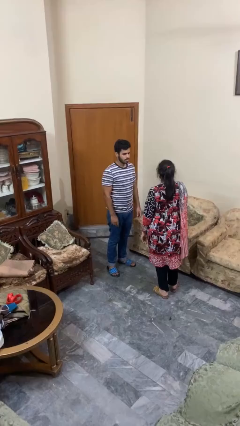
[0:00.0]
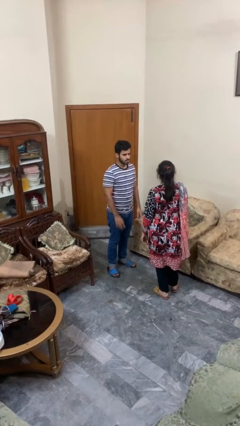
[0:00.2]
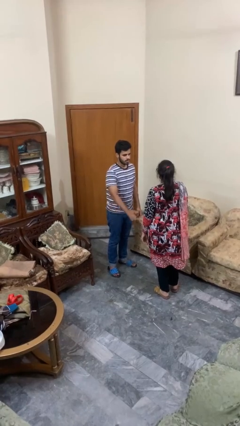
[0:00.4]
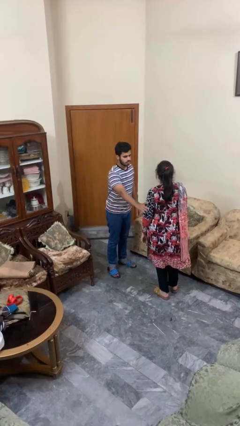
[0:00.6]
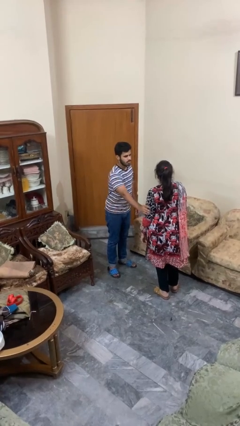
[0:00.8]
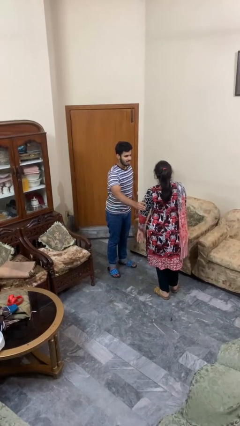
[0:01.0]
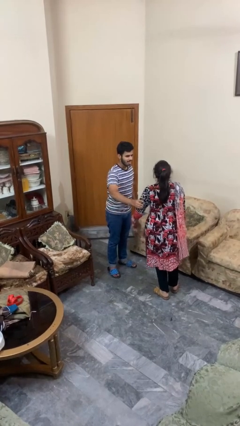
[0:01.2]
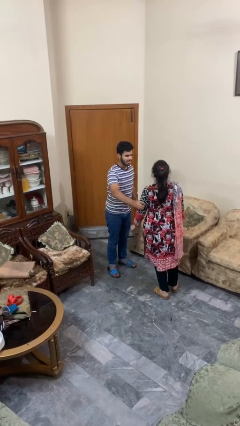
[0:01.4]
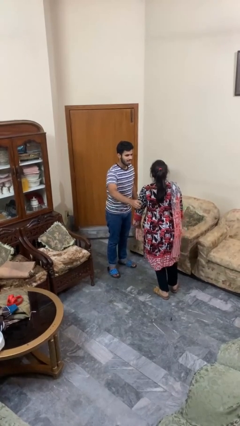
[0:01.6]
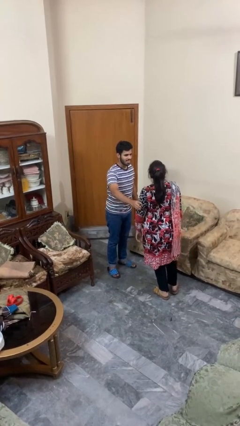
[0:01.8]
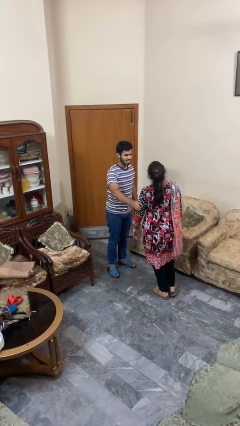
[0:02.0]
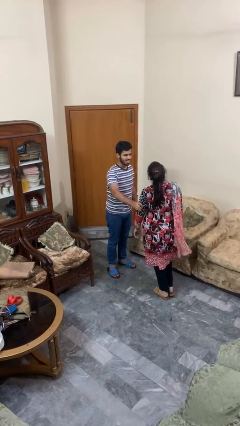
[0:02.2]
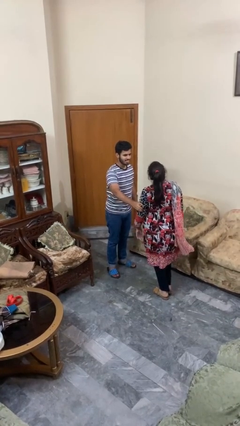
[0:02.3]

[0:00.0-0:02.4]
person grabs person by bicep

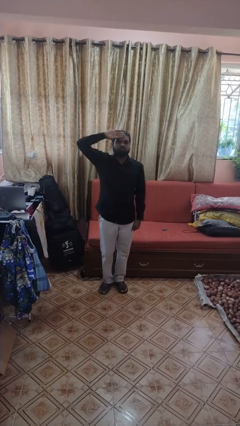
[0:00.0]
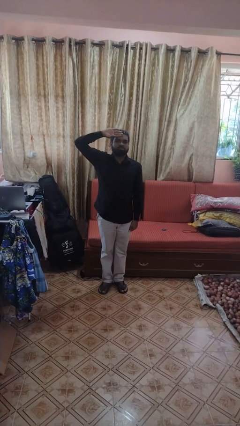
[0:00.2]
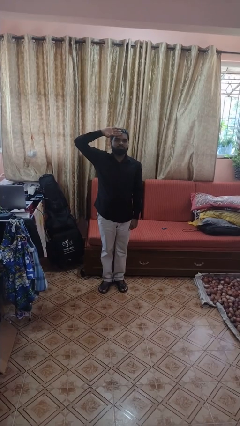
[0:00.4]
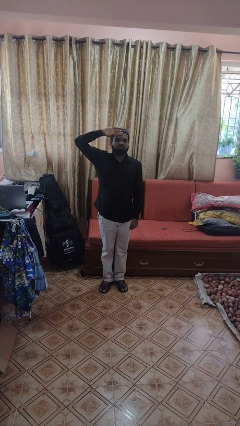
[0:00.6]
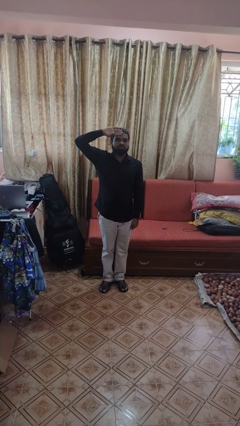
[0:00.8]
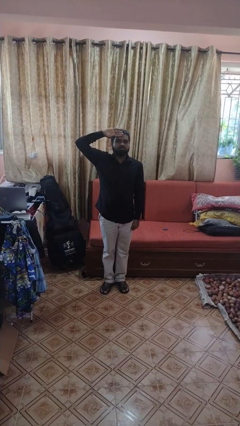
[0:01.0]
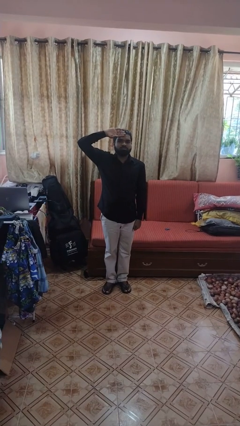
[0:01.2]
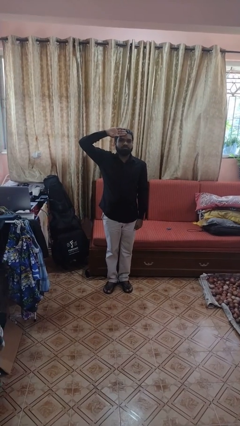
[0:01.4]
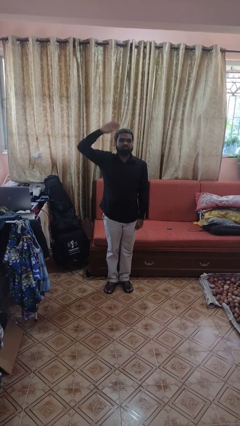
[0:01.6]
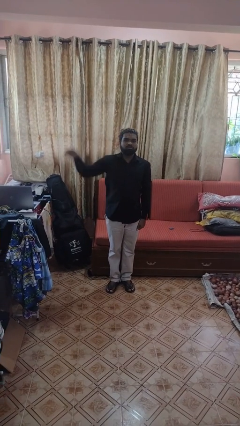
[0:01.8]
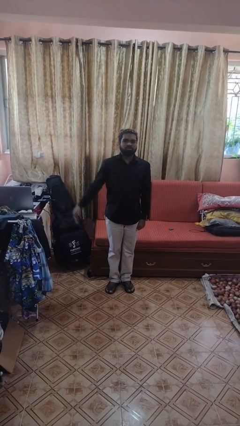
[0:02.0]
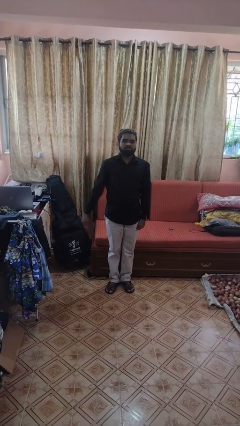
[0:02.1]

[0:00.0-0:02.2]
person salutes

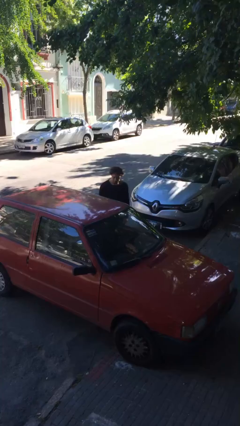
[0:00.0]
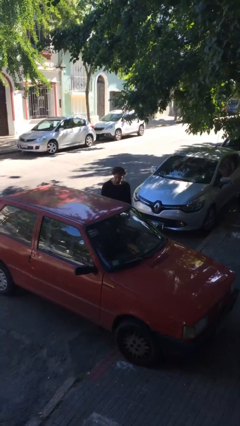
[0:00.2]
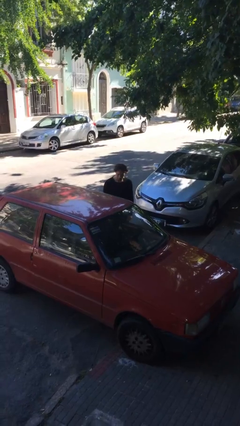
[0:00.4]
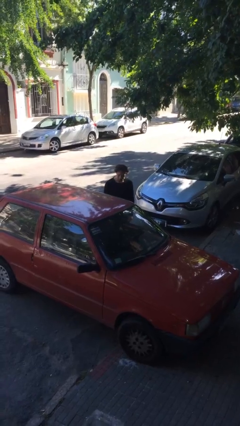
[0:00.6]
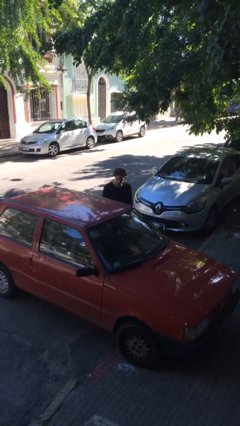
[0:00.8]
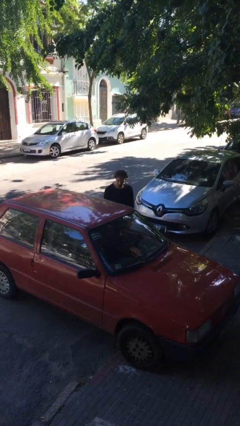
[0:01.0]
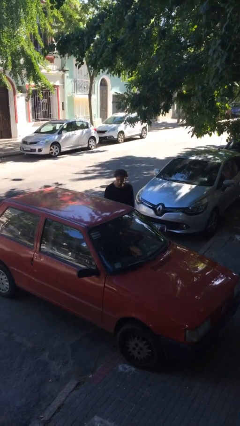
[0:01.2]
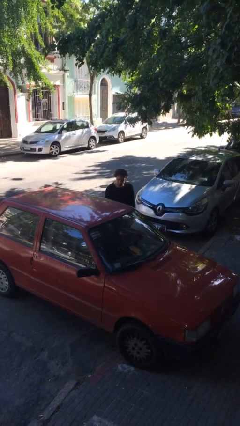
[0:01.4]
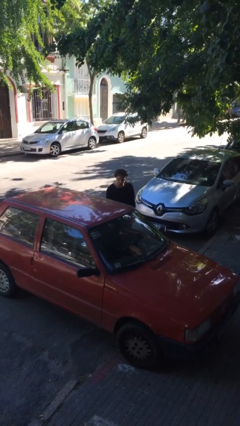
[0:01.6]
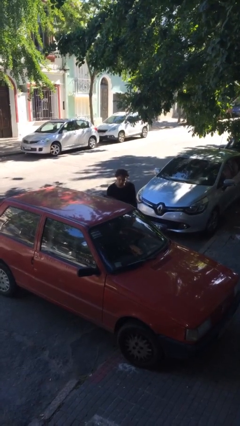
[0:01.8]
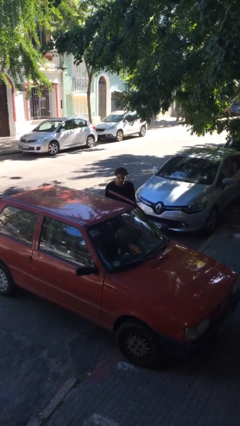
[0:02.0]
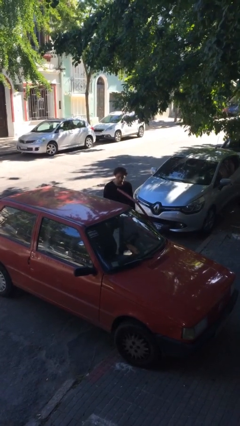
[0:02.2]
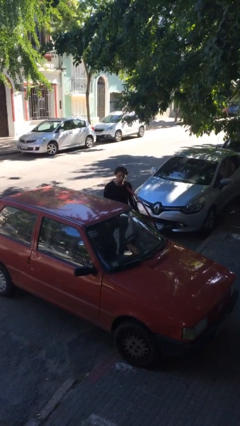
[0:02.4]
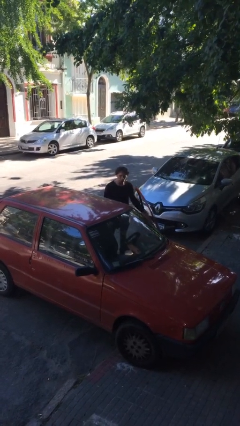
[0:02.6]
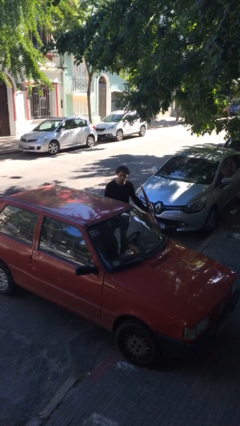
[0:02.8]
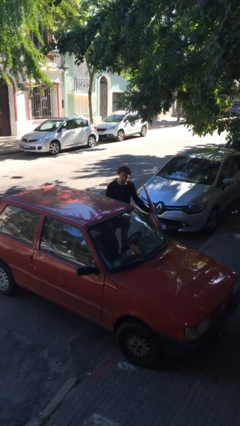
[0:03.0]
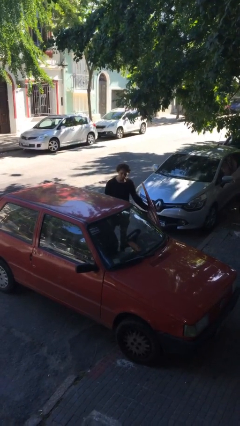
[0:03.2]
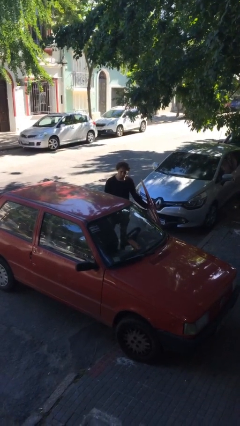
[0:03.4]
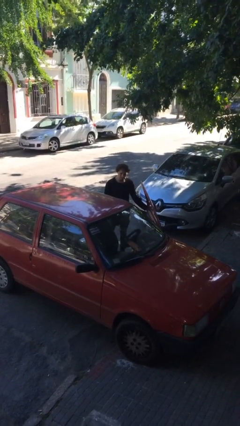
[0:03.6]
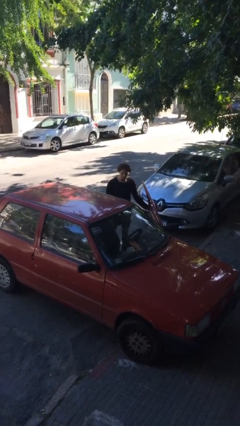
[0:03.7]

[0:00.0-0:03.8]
person opens car door

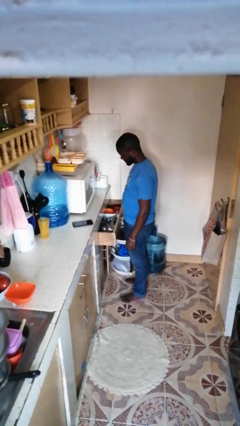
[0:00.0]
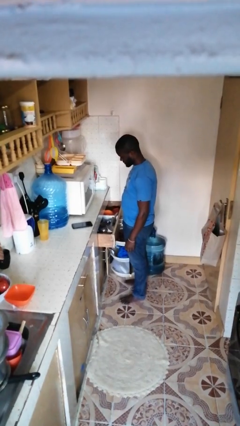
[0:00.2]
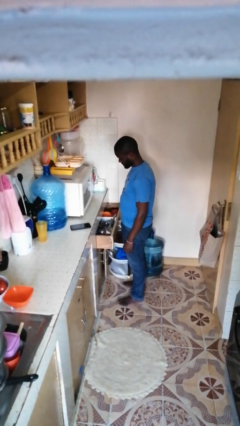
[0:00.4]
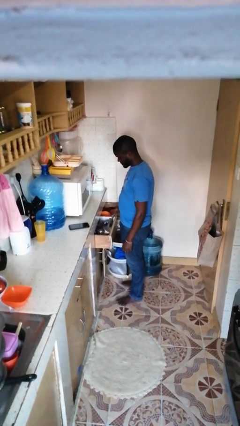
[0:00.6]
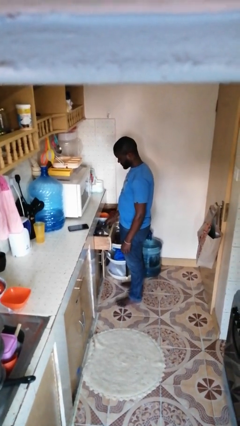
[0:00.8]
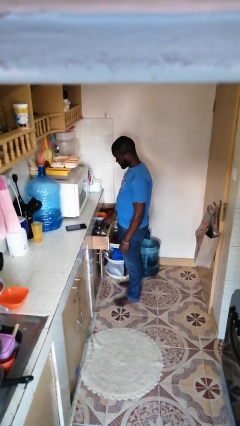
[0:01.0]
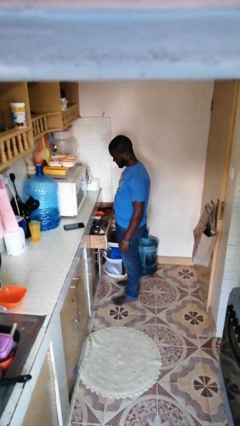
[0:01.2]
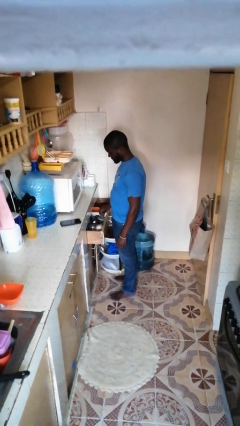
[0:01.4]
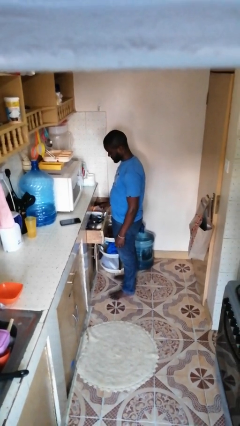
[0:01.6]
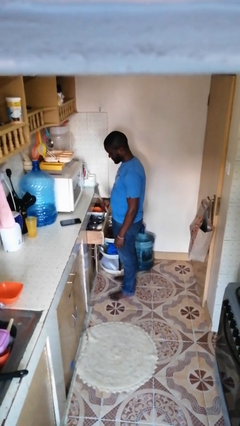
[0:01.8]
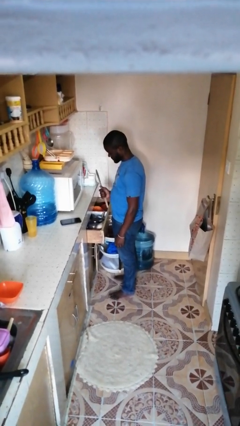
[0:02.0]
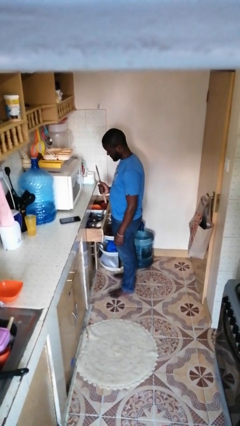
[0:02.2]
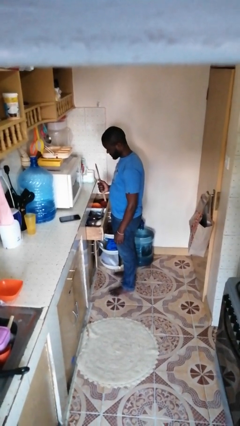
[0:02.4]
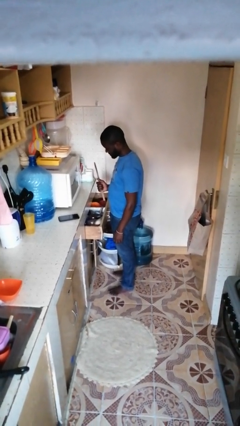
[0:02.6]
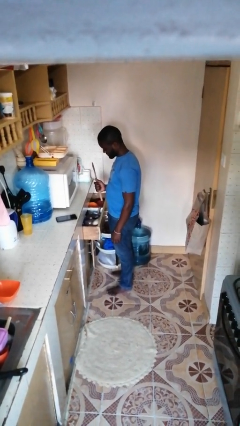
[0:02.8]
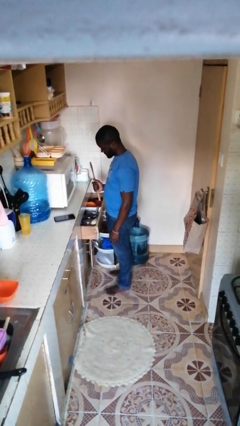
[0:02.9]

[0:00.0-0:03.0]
person takes object from kitchen drawer

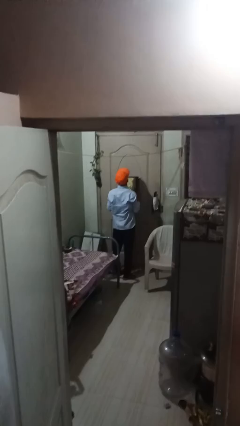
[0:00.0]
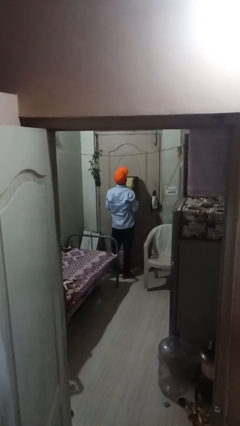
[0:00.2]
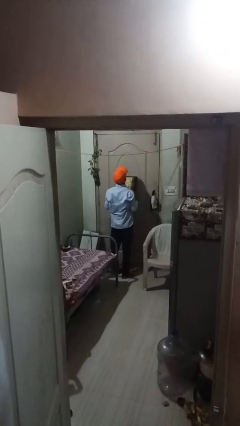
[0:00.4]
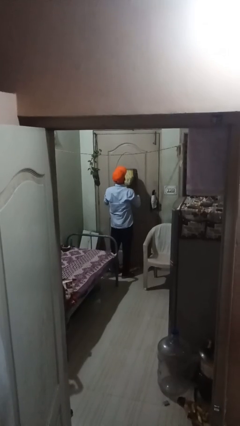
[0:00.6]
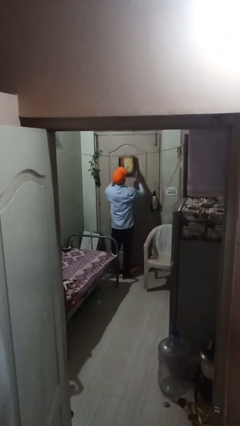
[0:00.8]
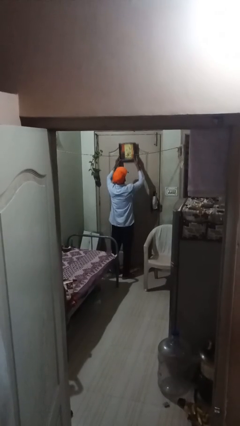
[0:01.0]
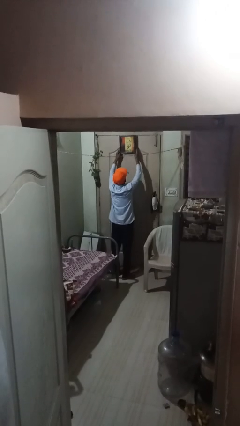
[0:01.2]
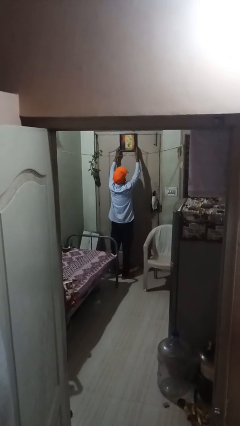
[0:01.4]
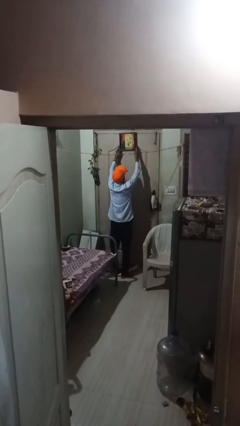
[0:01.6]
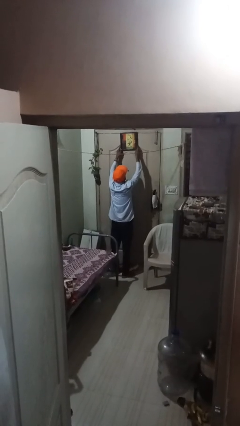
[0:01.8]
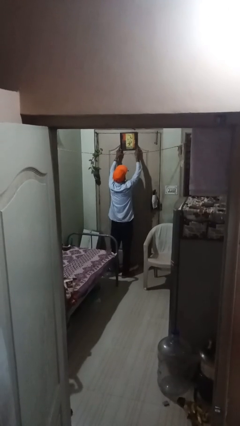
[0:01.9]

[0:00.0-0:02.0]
person puts up picture frame

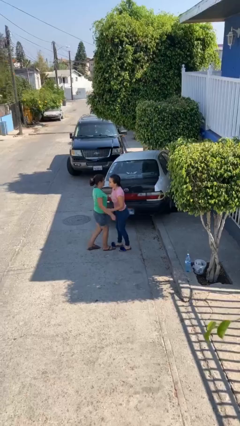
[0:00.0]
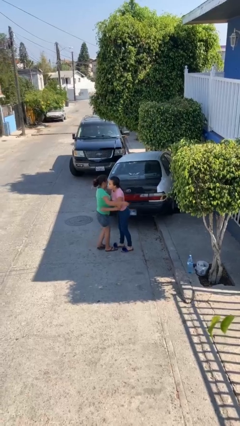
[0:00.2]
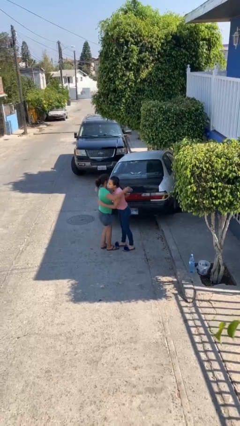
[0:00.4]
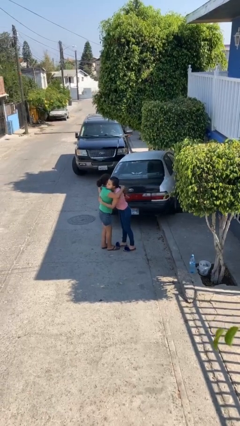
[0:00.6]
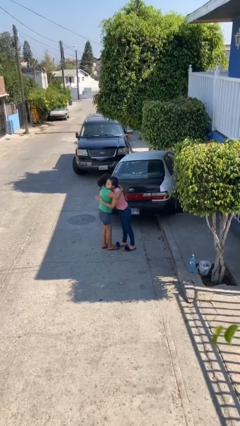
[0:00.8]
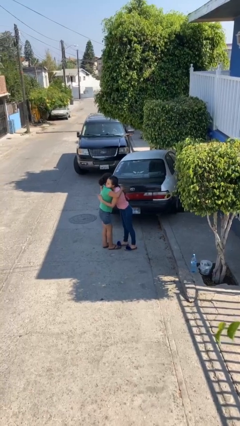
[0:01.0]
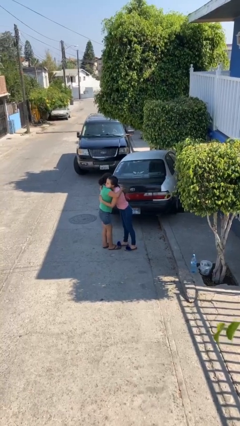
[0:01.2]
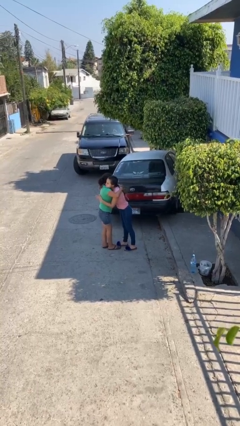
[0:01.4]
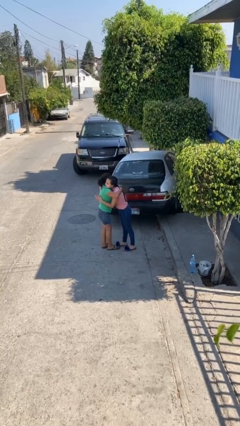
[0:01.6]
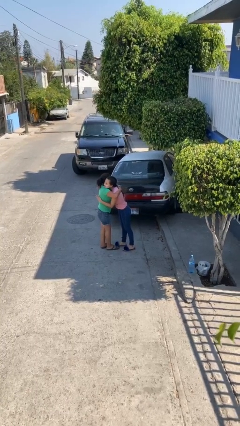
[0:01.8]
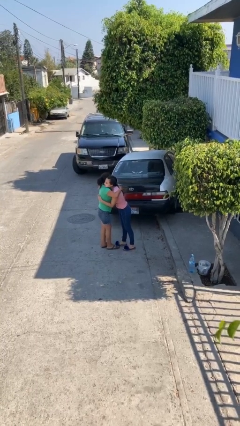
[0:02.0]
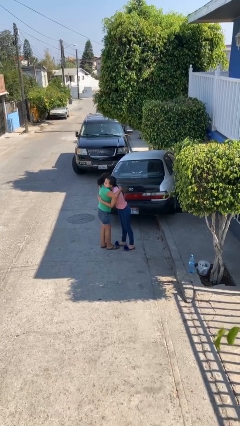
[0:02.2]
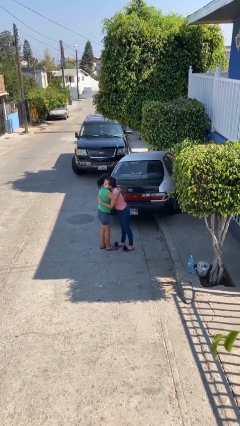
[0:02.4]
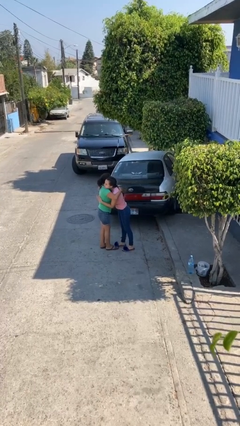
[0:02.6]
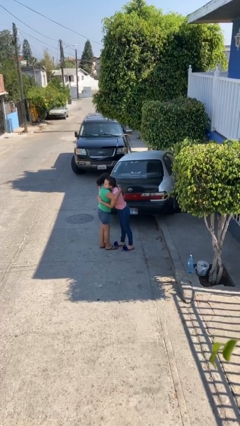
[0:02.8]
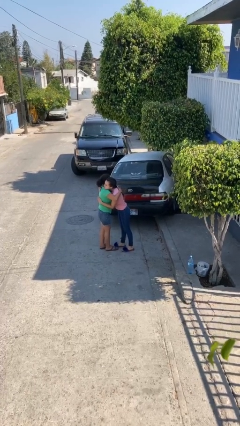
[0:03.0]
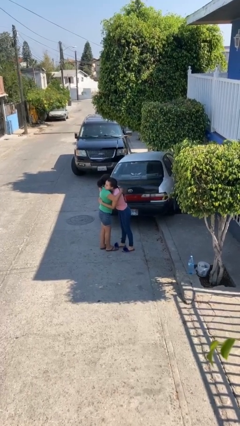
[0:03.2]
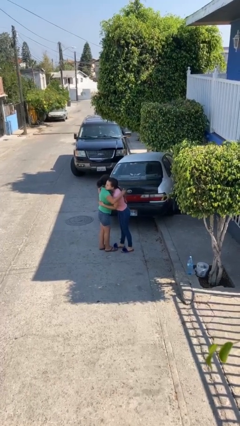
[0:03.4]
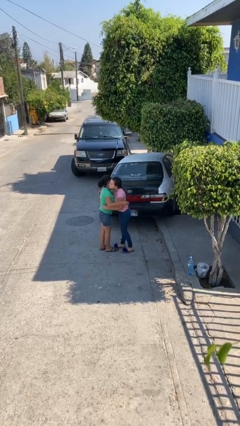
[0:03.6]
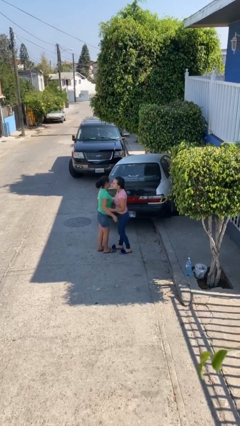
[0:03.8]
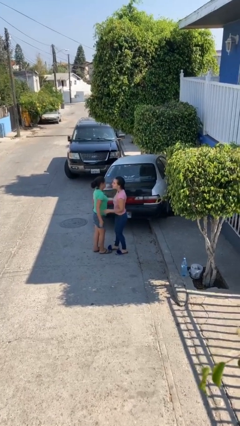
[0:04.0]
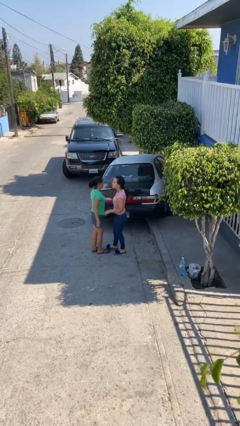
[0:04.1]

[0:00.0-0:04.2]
person embraces person
